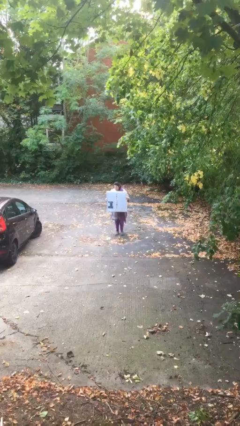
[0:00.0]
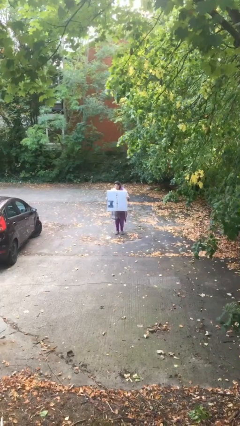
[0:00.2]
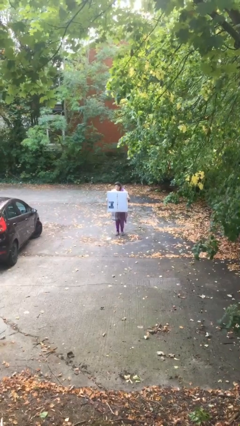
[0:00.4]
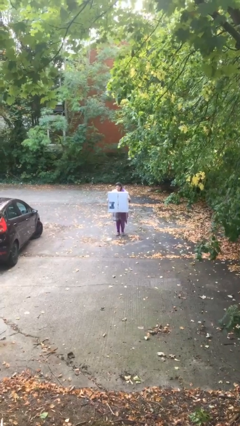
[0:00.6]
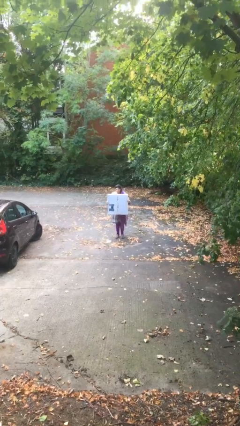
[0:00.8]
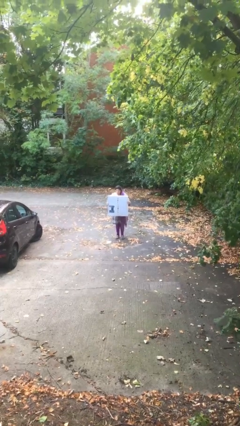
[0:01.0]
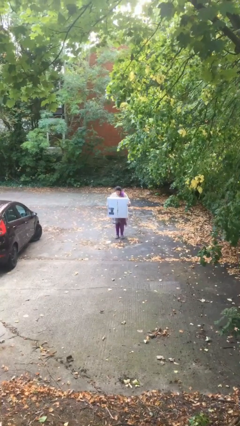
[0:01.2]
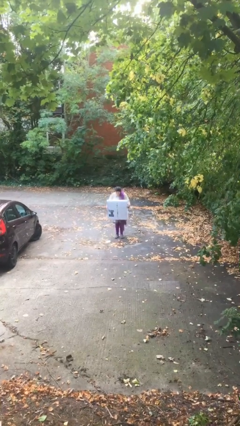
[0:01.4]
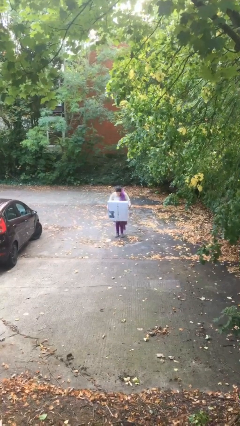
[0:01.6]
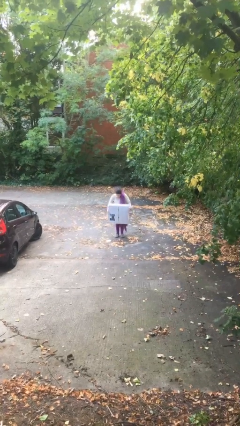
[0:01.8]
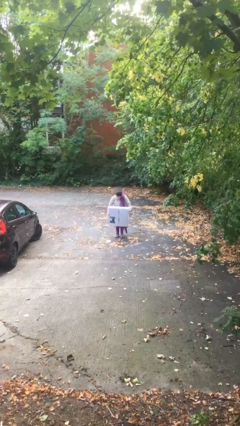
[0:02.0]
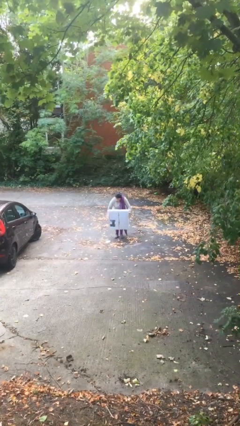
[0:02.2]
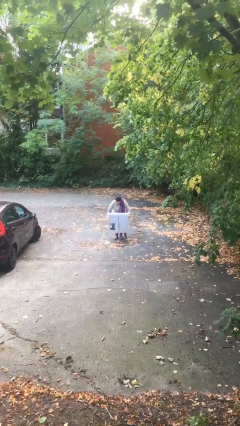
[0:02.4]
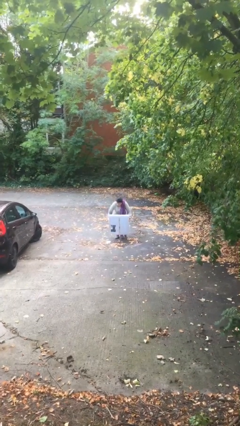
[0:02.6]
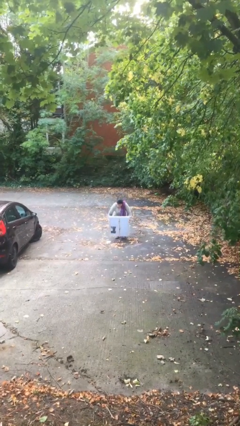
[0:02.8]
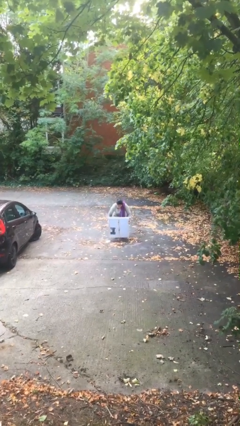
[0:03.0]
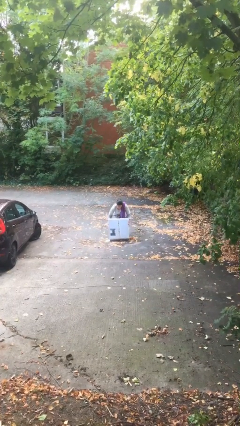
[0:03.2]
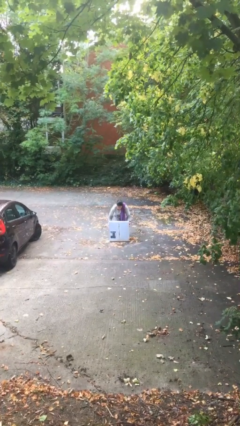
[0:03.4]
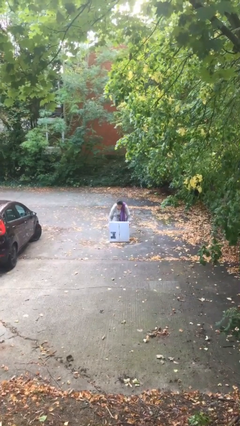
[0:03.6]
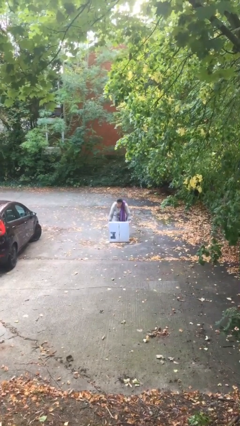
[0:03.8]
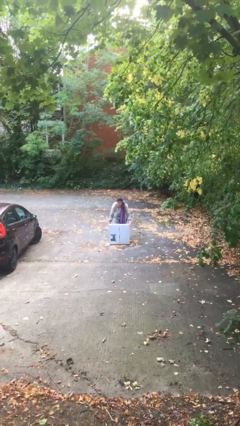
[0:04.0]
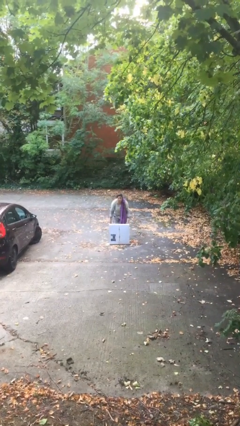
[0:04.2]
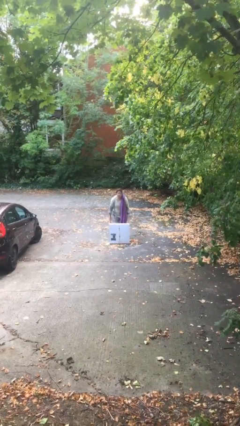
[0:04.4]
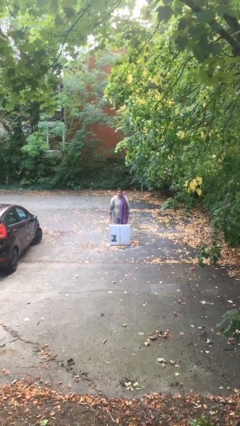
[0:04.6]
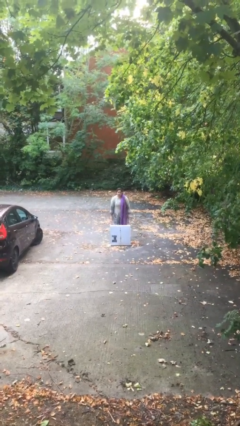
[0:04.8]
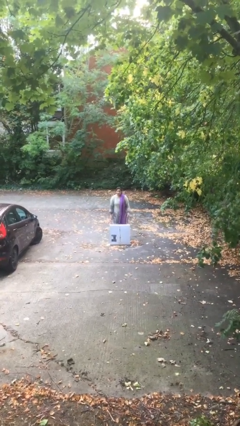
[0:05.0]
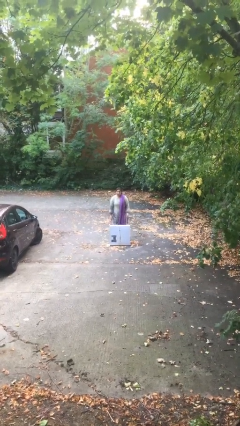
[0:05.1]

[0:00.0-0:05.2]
person puts down object on floor

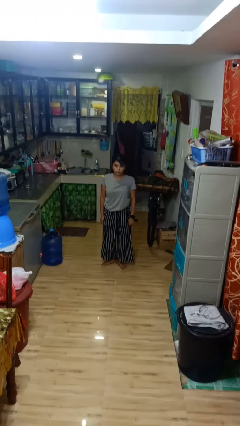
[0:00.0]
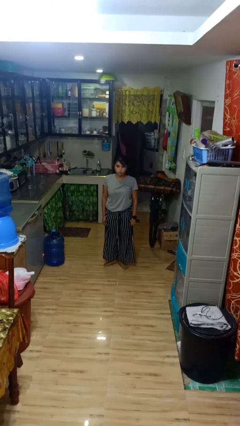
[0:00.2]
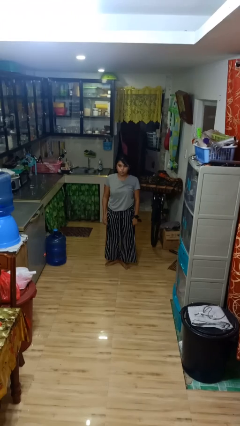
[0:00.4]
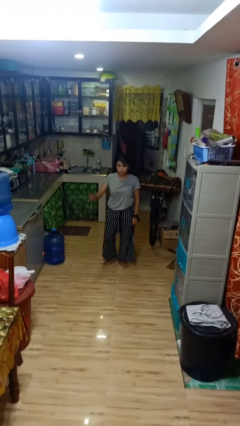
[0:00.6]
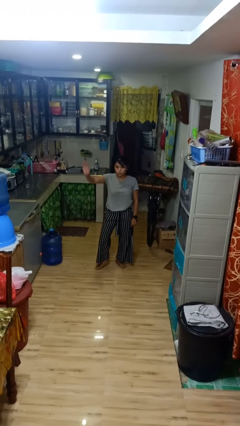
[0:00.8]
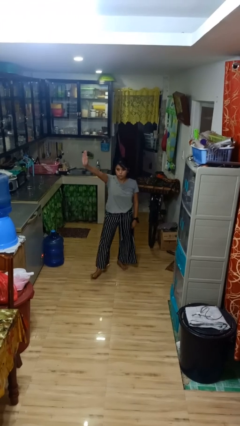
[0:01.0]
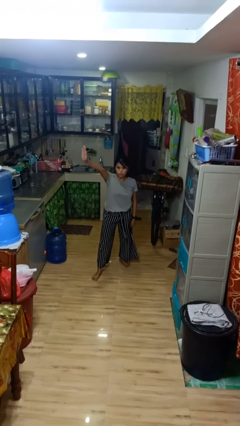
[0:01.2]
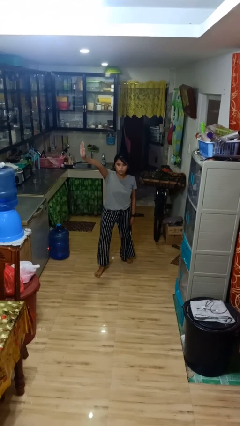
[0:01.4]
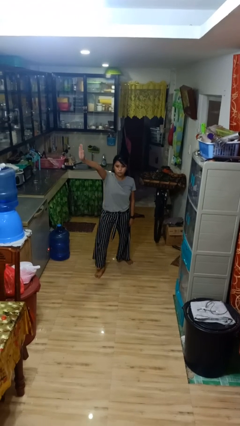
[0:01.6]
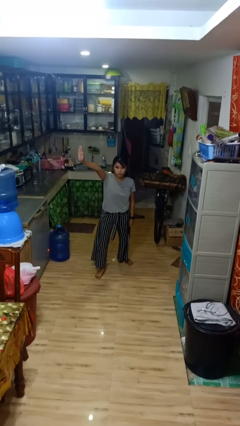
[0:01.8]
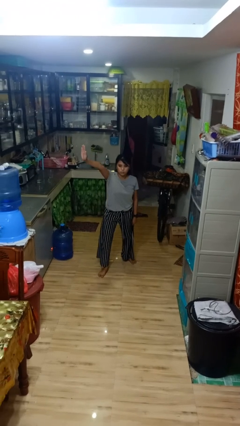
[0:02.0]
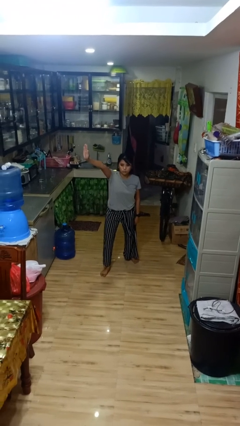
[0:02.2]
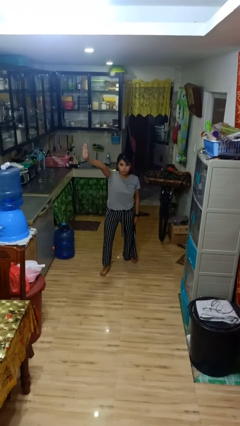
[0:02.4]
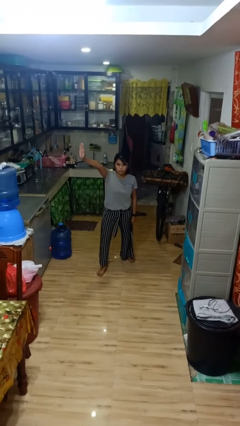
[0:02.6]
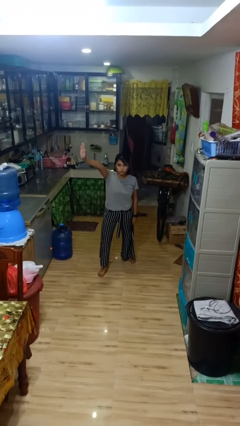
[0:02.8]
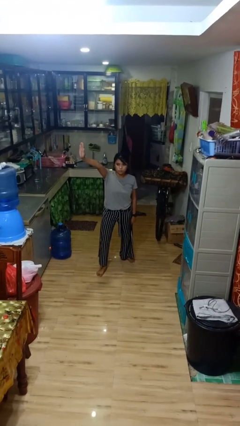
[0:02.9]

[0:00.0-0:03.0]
person gestures stop

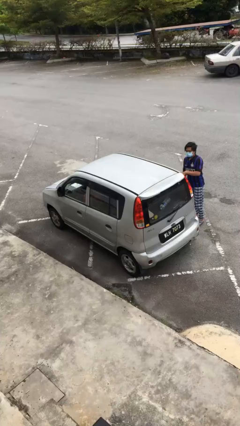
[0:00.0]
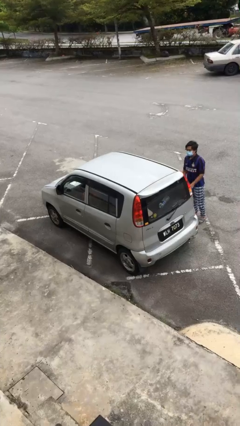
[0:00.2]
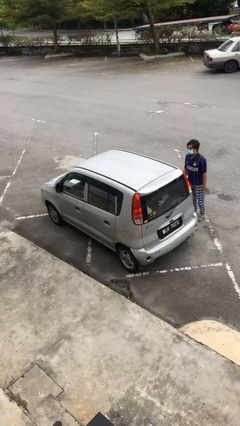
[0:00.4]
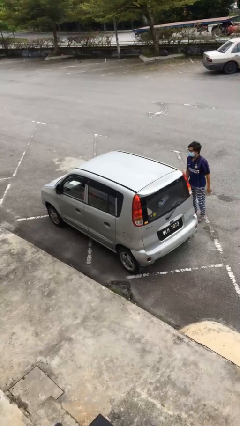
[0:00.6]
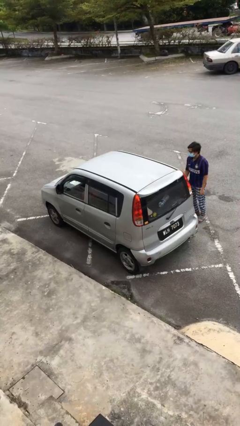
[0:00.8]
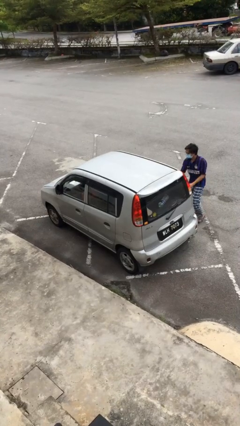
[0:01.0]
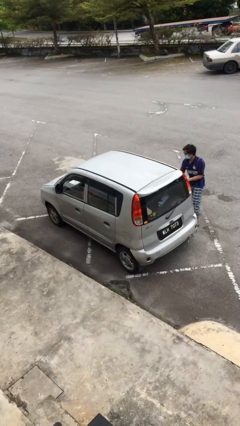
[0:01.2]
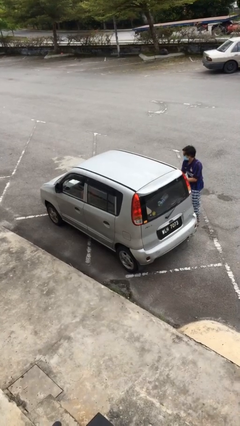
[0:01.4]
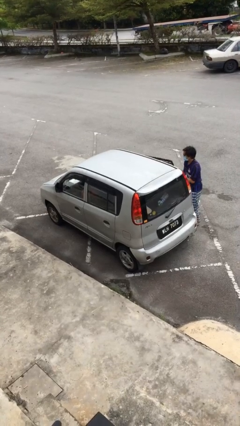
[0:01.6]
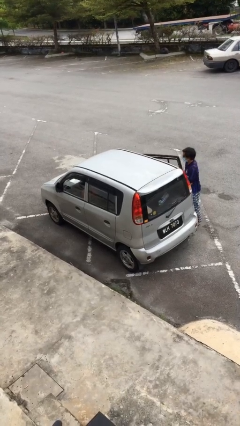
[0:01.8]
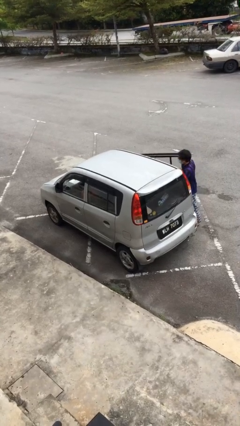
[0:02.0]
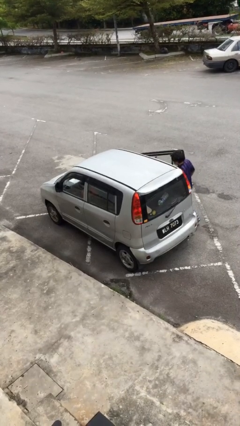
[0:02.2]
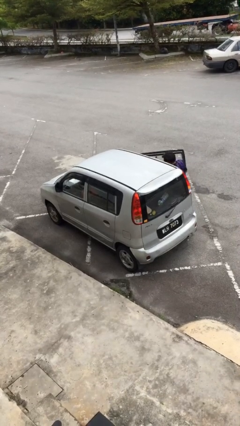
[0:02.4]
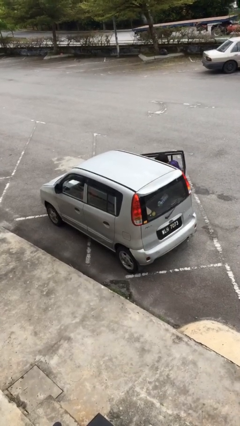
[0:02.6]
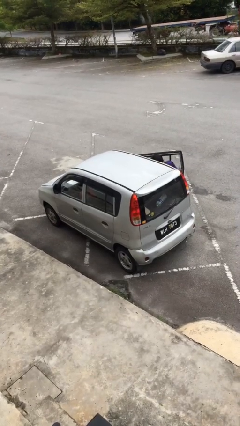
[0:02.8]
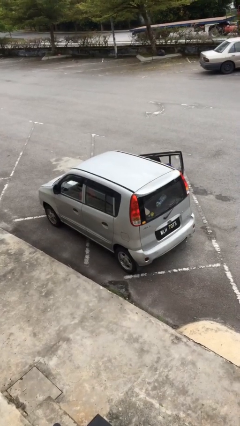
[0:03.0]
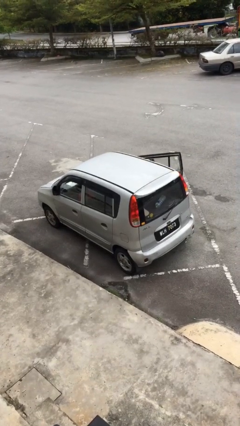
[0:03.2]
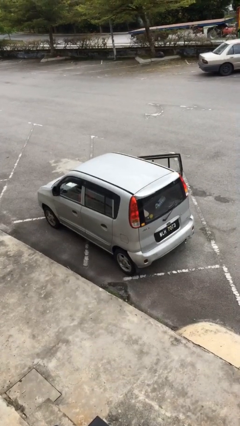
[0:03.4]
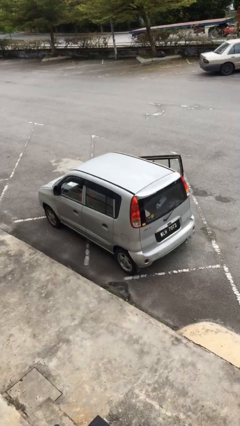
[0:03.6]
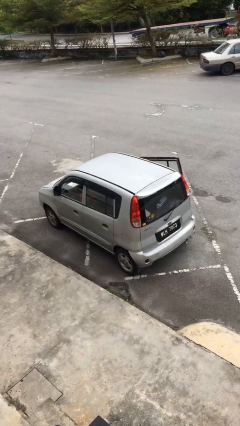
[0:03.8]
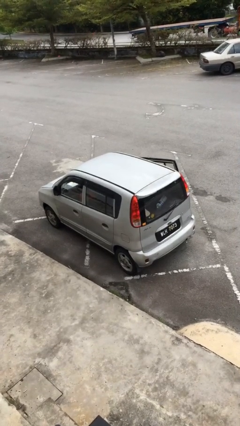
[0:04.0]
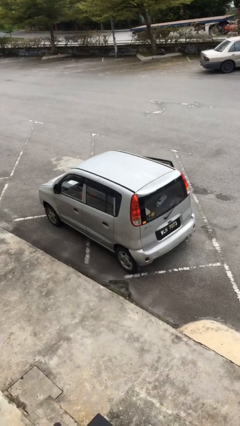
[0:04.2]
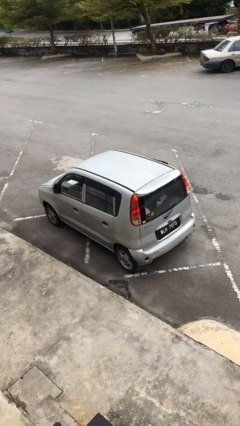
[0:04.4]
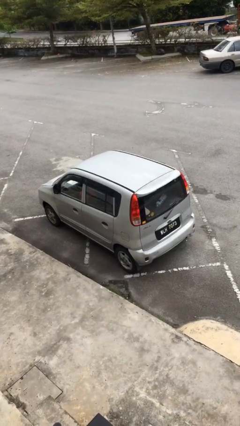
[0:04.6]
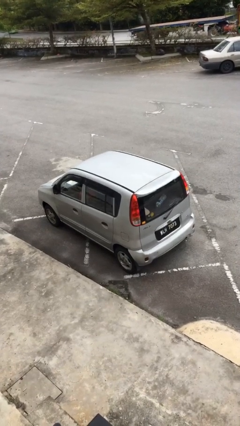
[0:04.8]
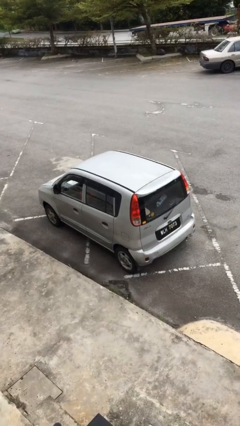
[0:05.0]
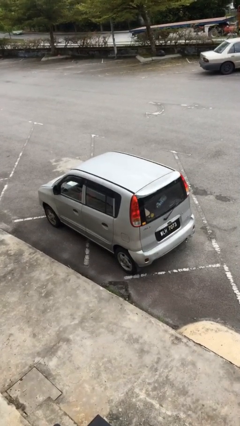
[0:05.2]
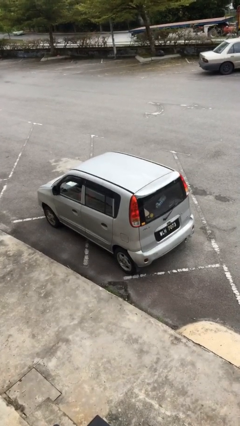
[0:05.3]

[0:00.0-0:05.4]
car picks up person

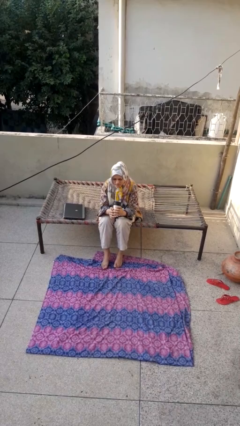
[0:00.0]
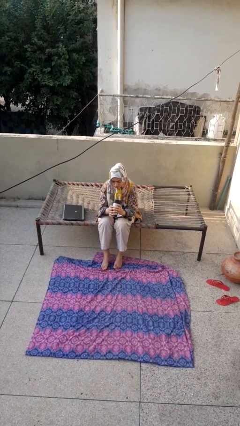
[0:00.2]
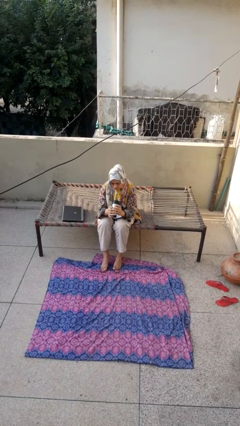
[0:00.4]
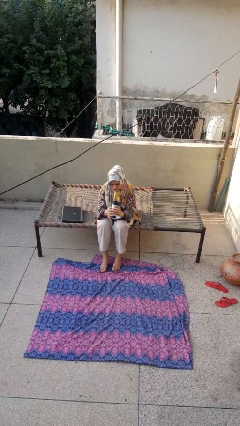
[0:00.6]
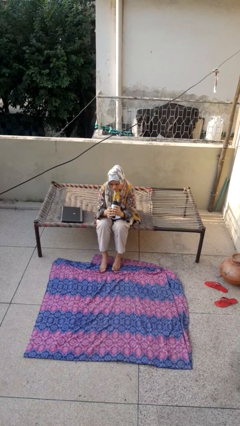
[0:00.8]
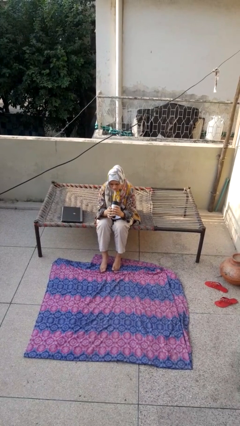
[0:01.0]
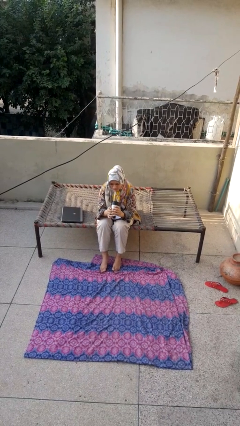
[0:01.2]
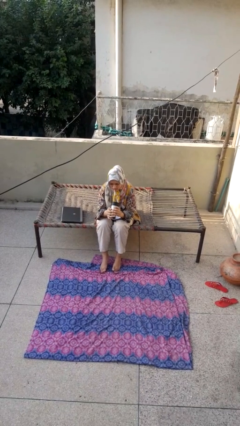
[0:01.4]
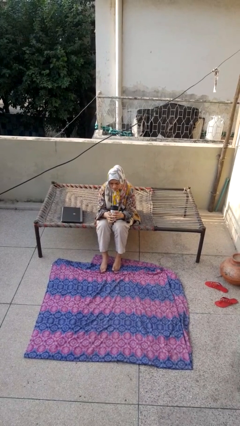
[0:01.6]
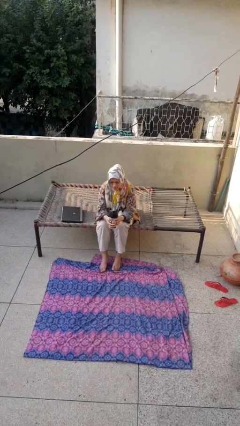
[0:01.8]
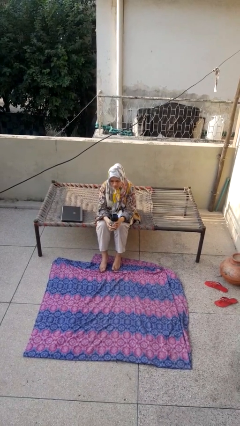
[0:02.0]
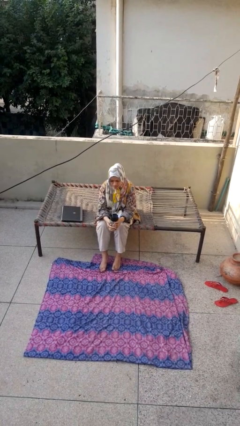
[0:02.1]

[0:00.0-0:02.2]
person drinks from straw

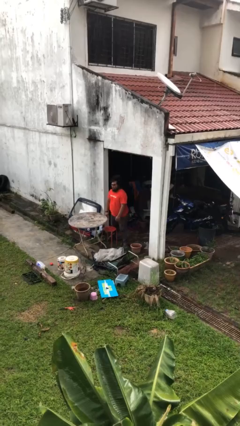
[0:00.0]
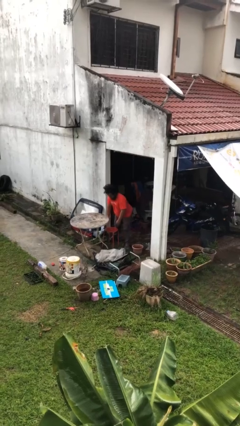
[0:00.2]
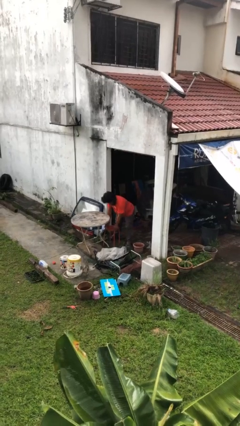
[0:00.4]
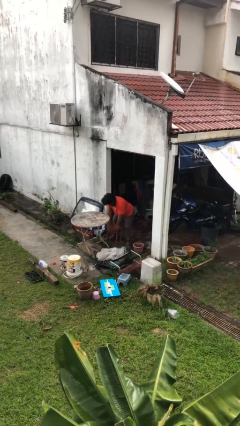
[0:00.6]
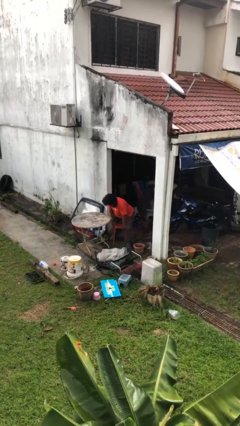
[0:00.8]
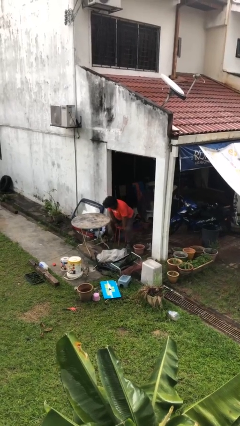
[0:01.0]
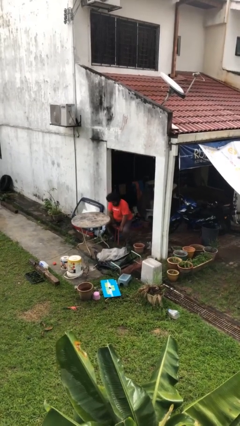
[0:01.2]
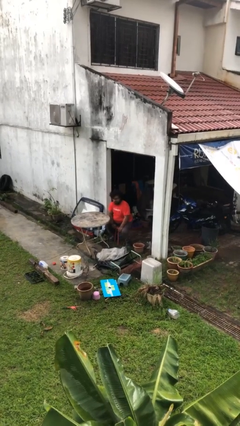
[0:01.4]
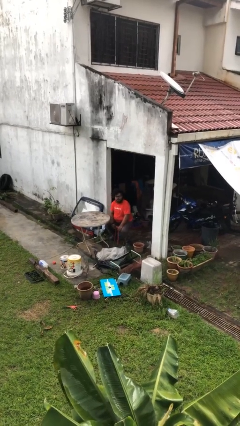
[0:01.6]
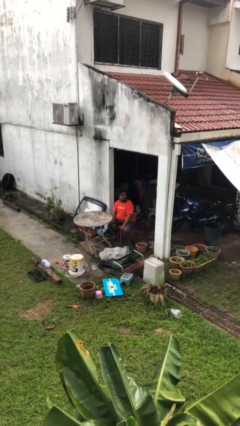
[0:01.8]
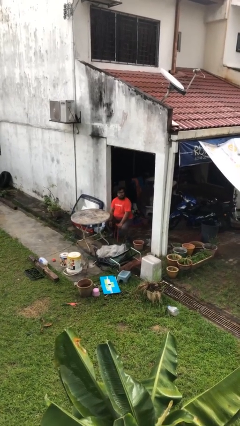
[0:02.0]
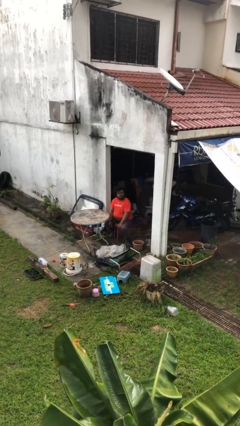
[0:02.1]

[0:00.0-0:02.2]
person sits down
